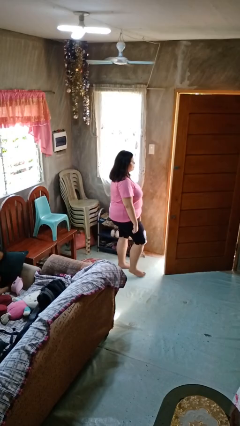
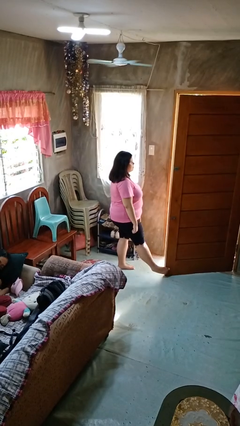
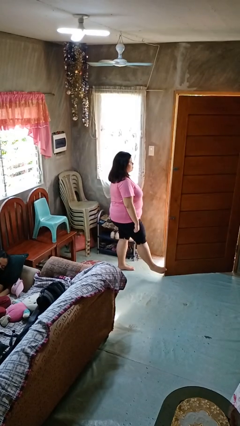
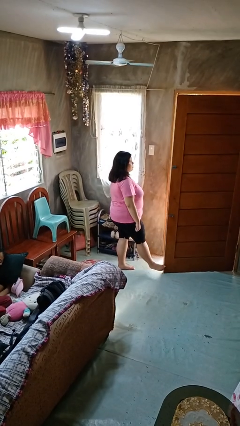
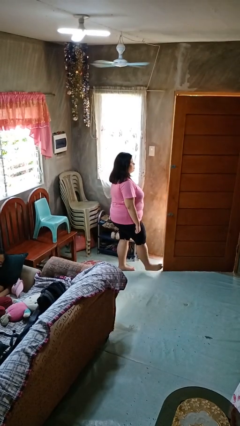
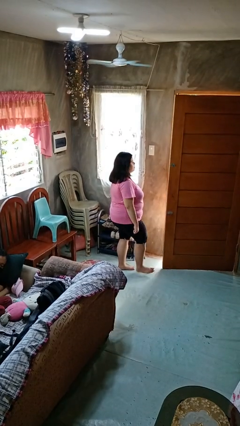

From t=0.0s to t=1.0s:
person closes door with foot

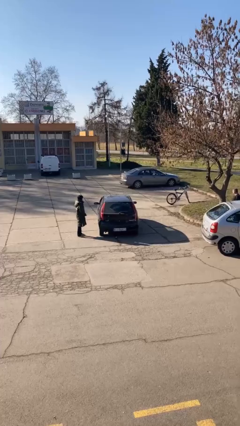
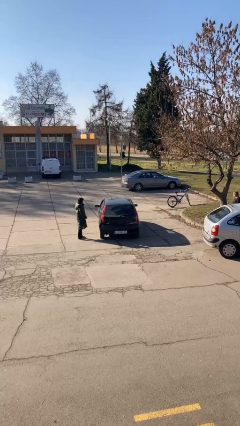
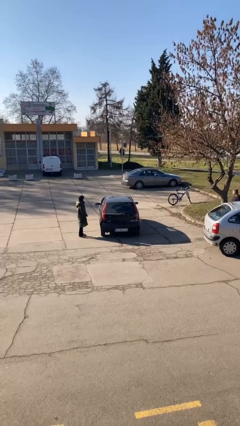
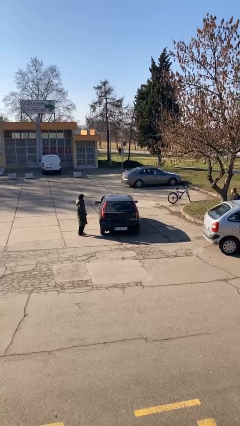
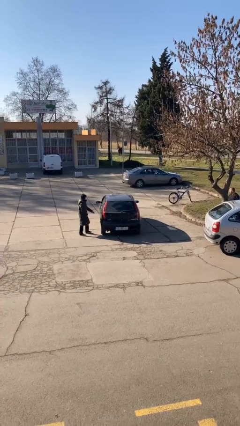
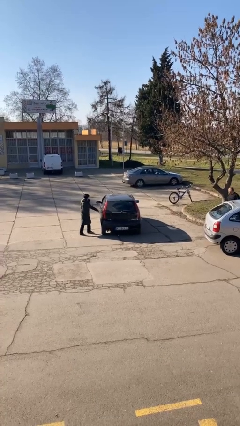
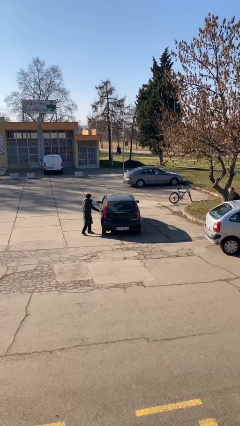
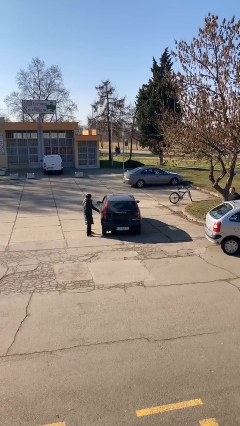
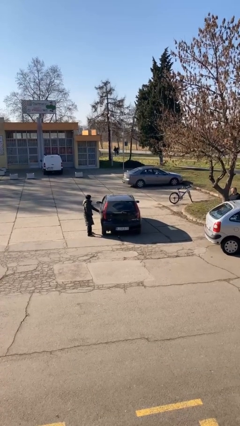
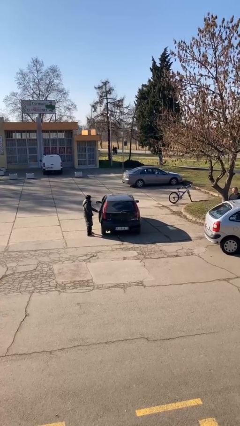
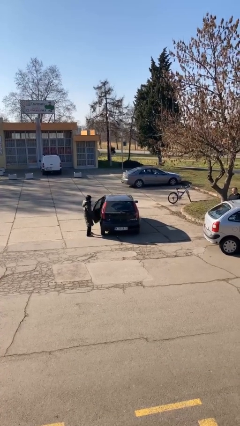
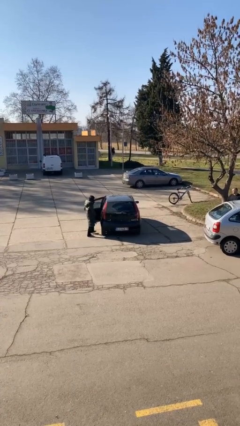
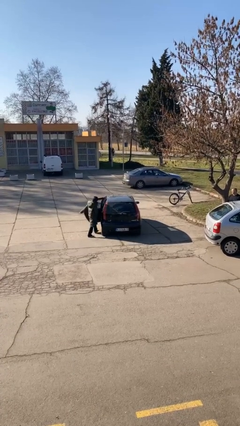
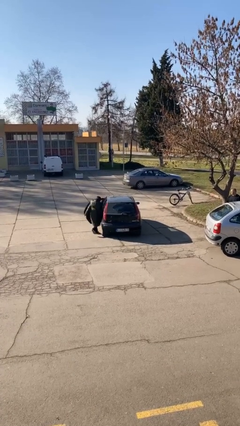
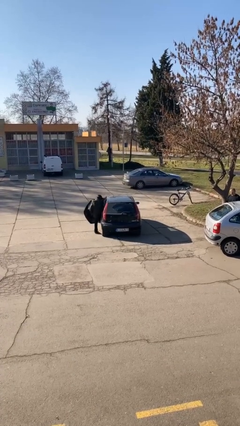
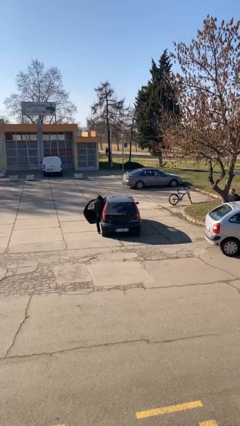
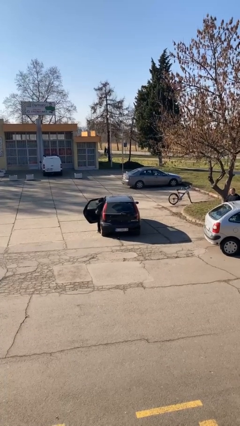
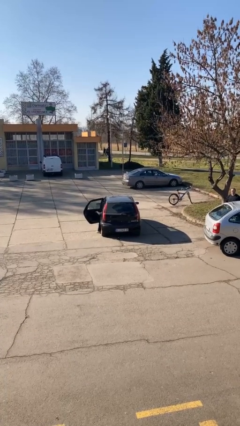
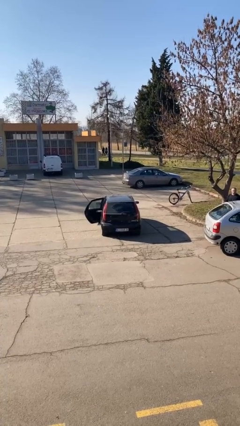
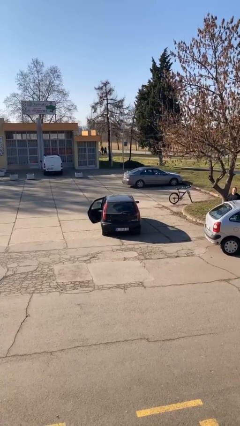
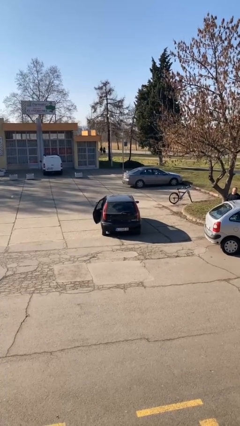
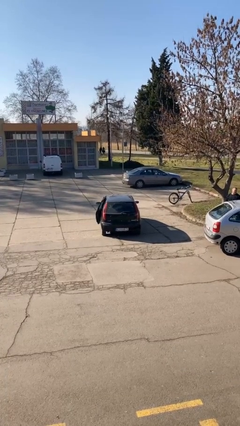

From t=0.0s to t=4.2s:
car picks up person

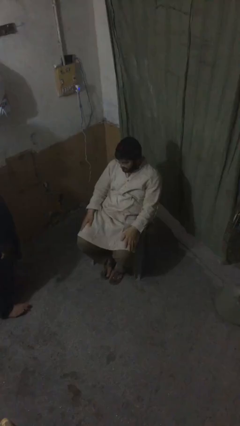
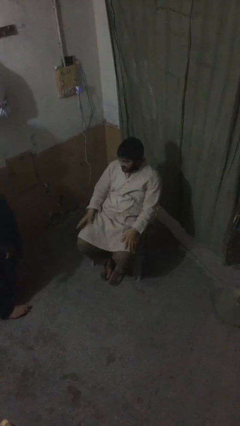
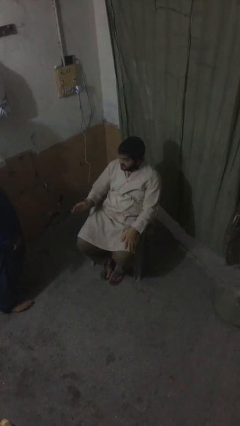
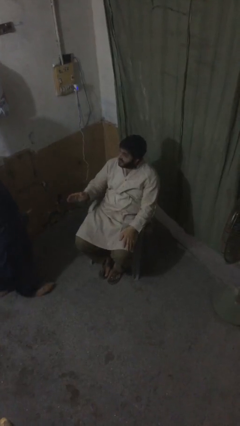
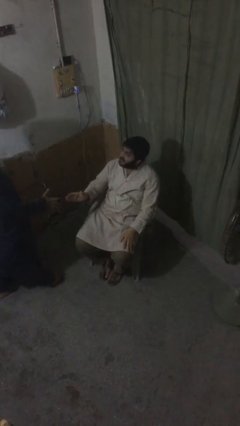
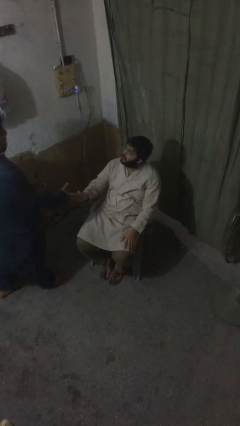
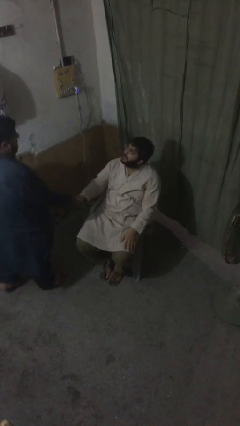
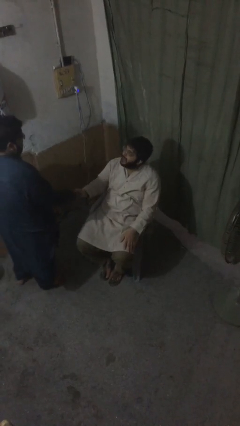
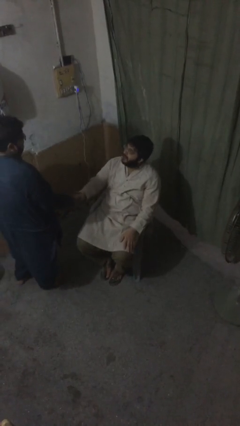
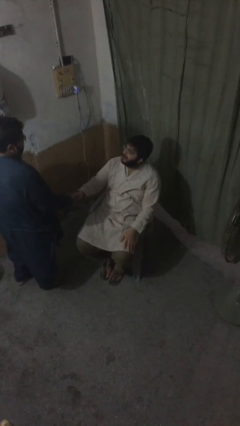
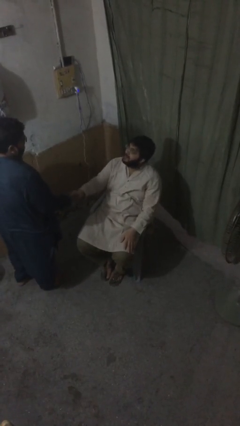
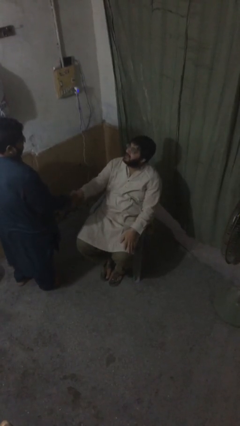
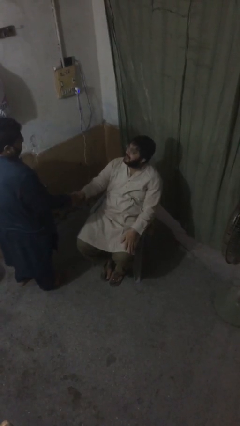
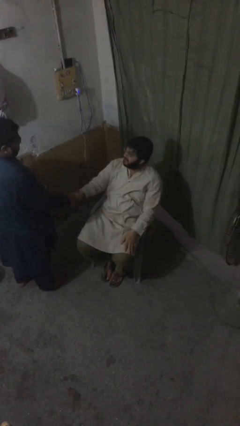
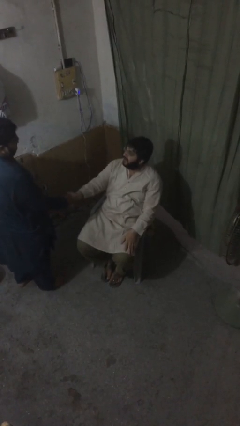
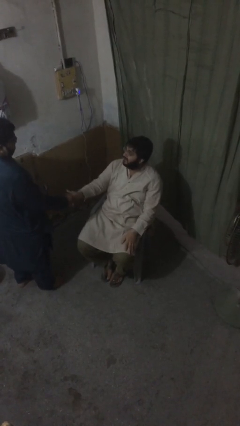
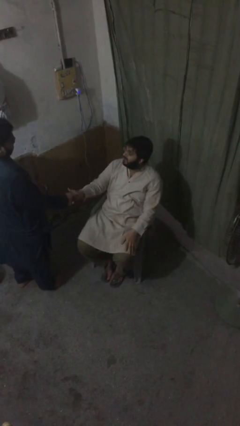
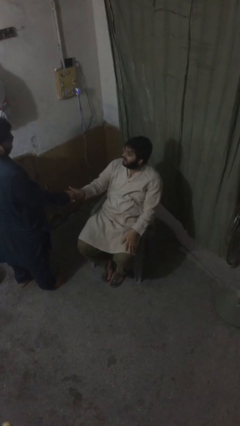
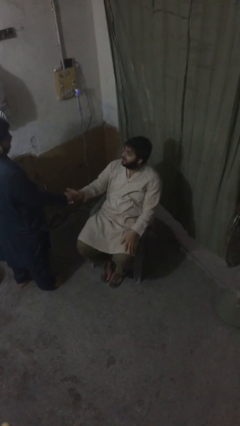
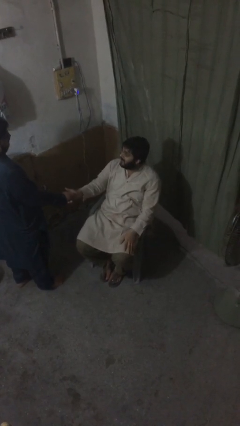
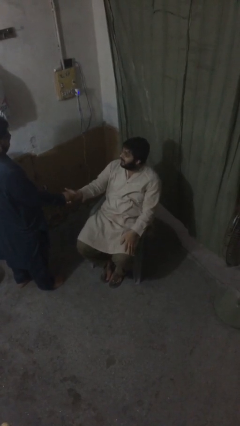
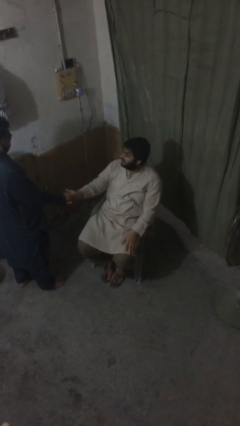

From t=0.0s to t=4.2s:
person shakes hand

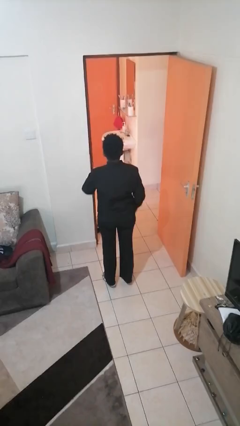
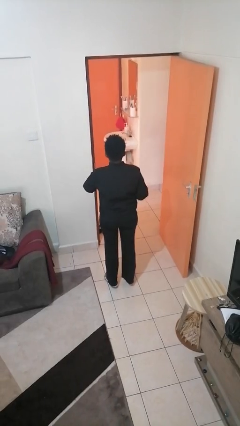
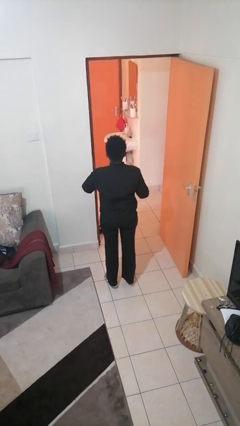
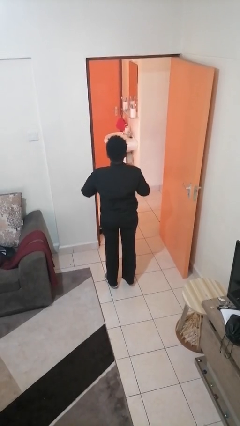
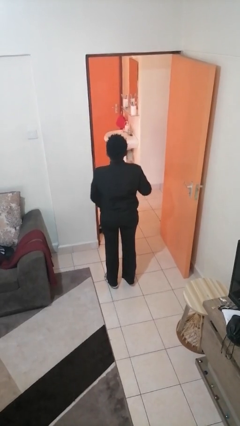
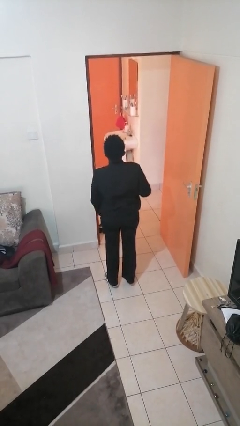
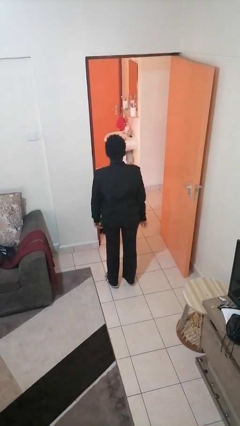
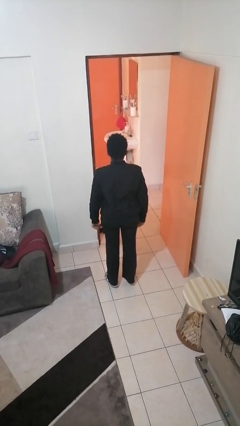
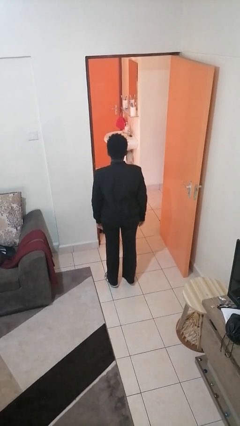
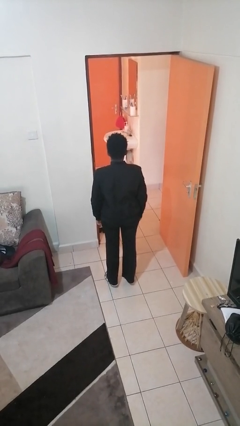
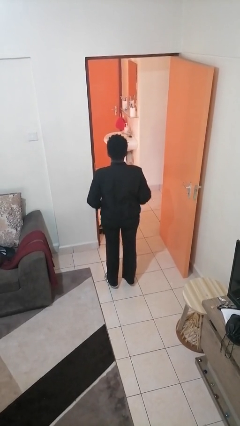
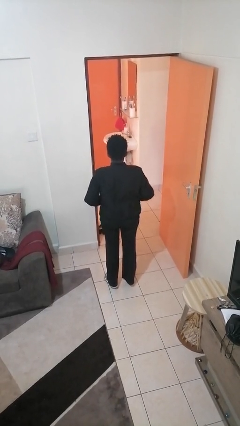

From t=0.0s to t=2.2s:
person unzips jacket

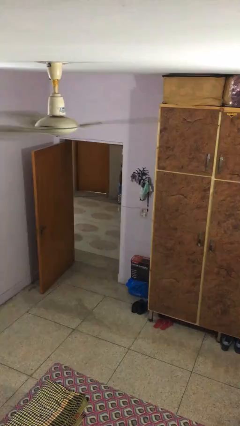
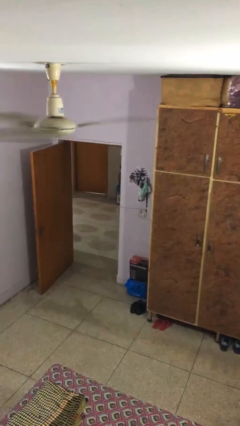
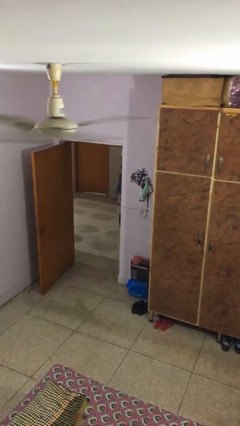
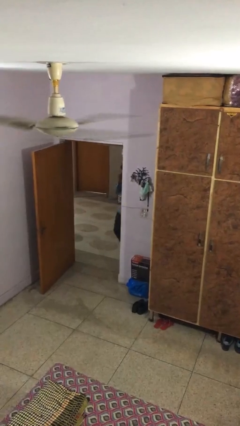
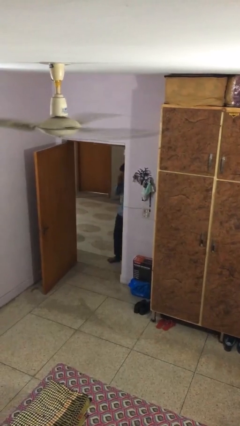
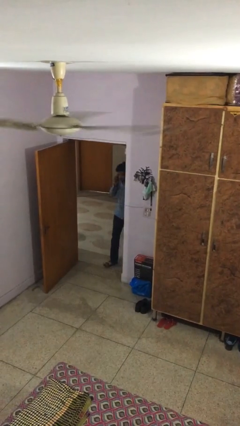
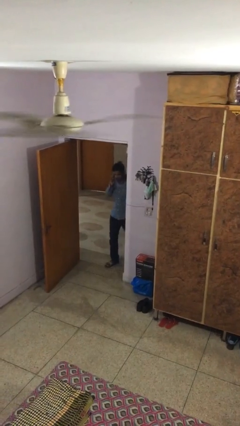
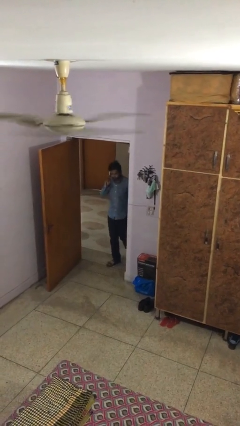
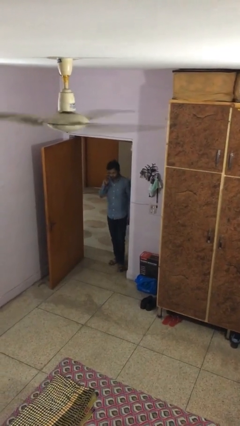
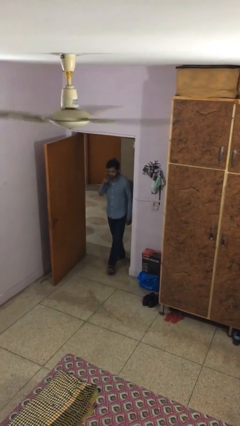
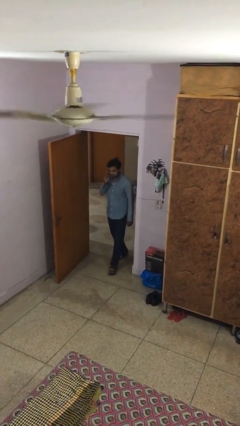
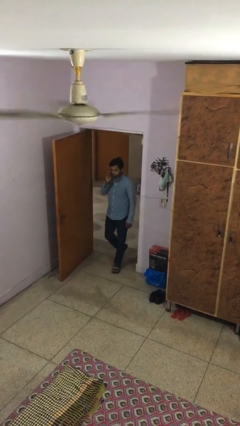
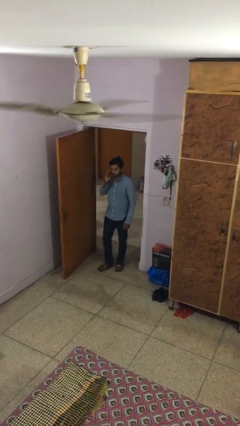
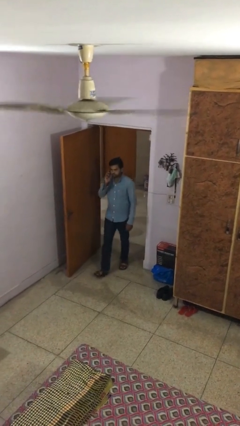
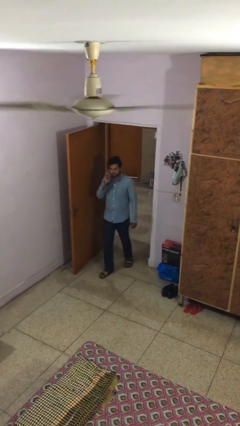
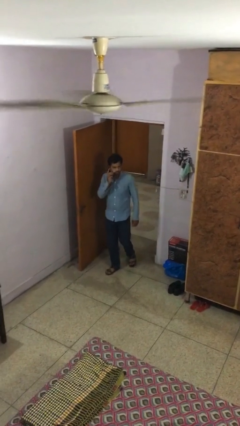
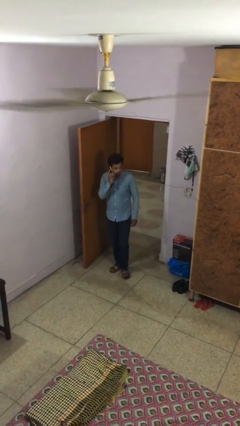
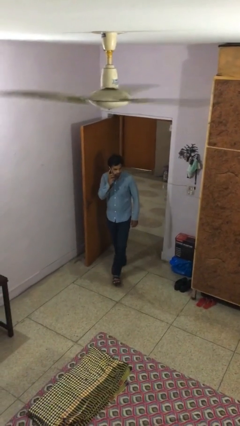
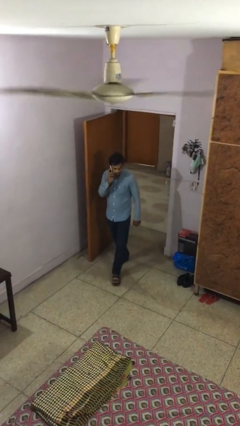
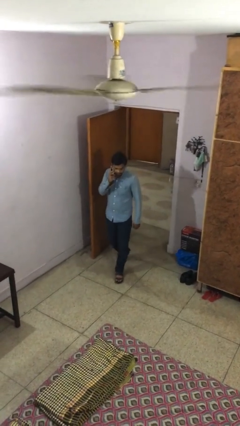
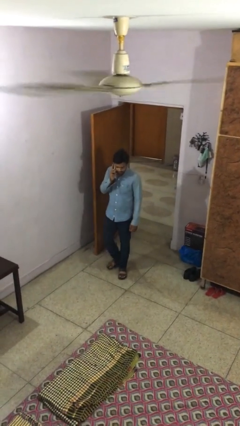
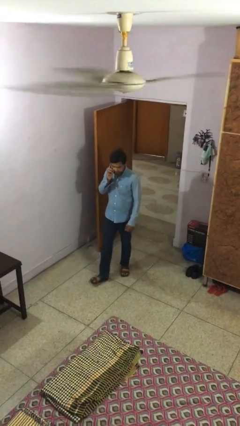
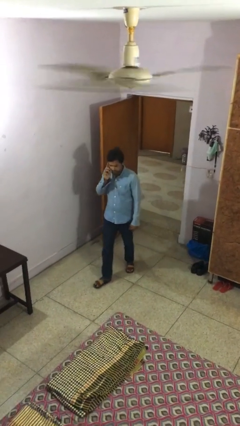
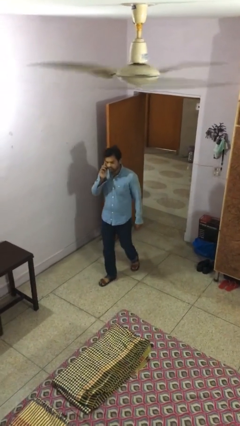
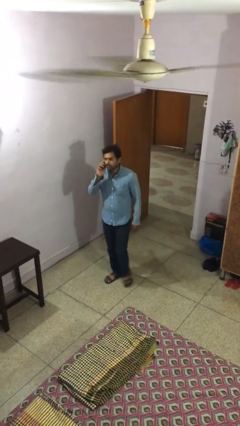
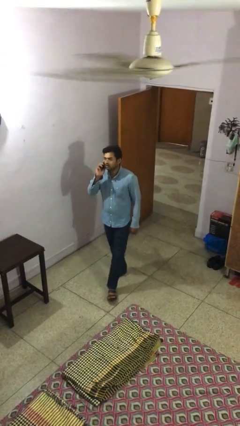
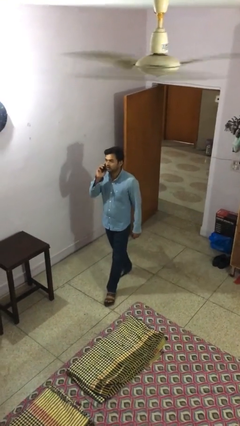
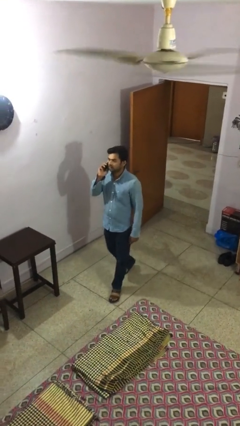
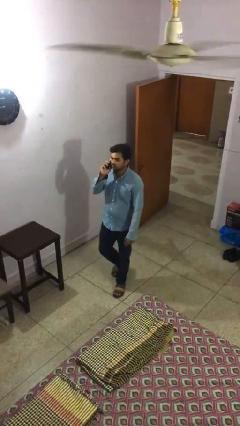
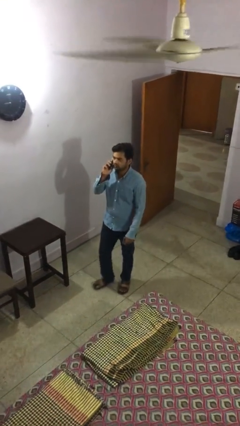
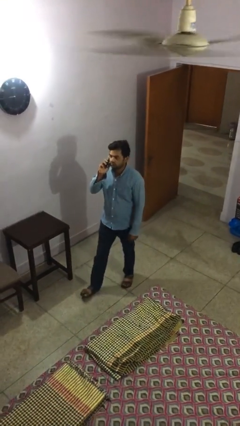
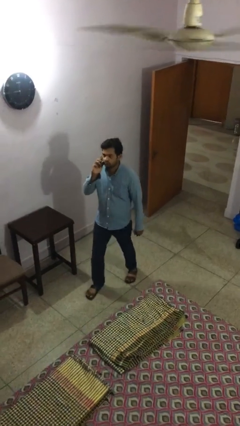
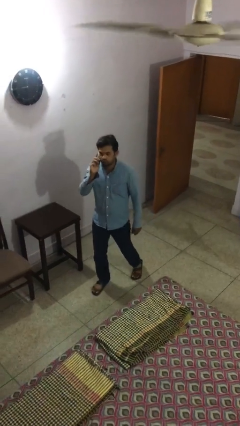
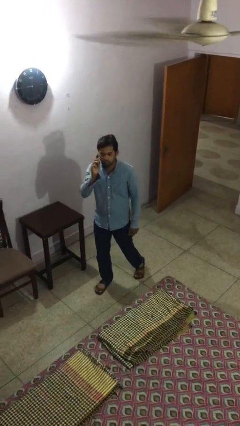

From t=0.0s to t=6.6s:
person enters scene through structure
